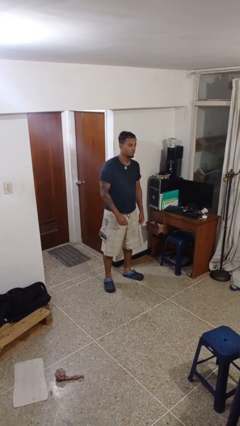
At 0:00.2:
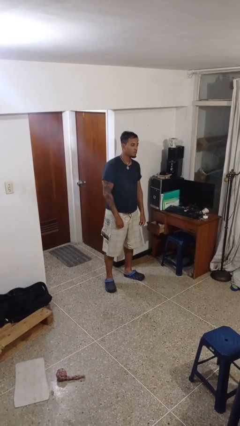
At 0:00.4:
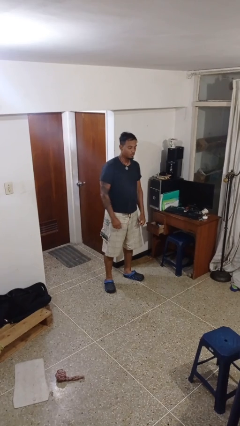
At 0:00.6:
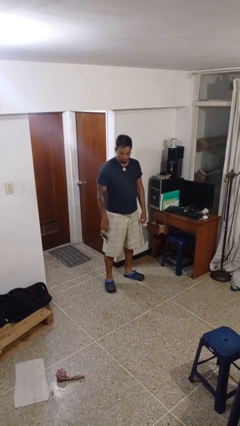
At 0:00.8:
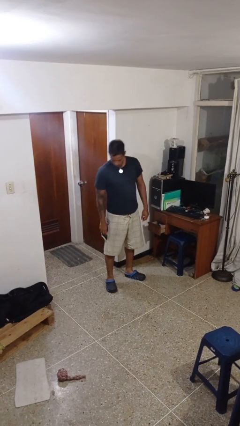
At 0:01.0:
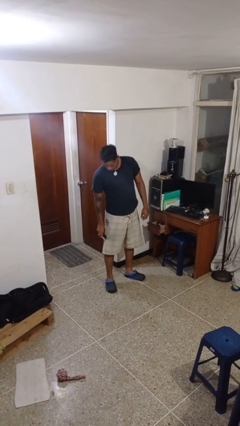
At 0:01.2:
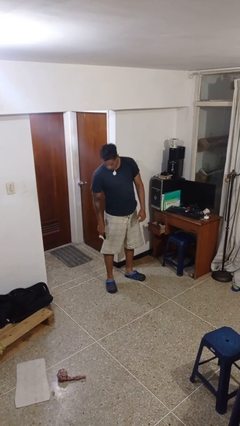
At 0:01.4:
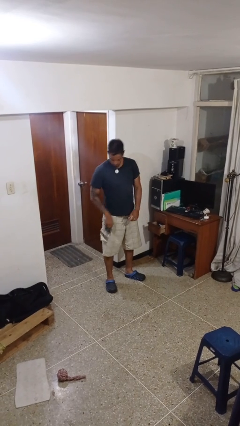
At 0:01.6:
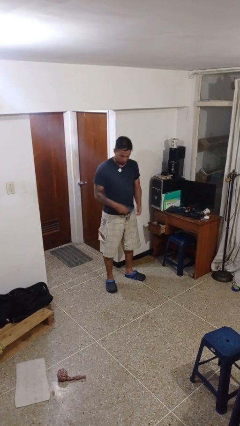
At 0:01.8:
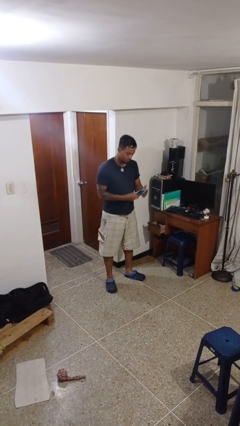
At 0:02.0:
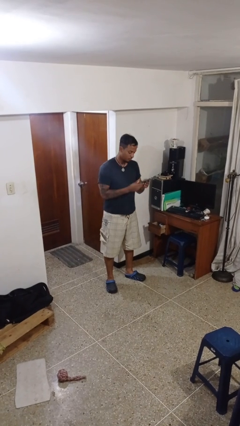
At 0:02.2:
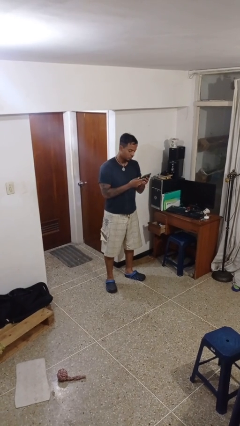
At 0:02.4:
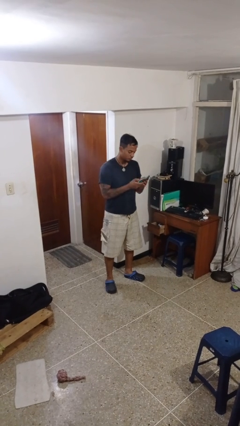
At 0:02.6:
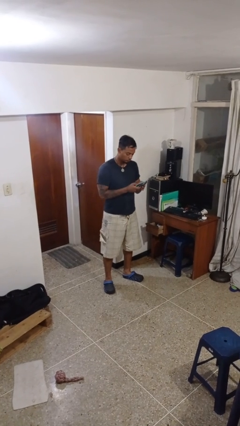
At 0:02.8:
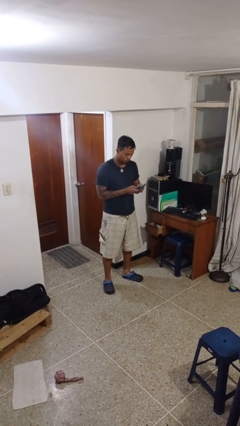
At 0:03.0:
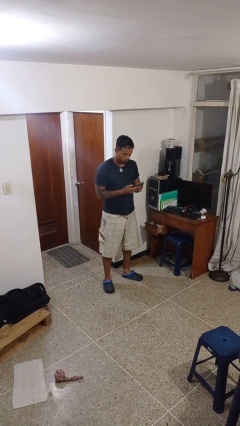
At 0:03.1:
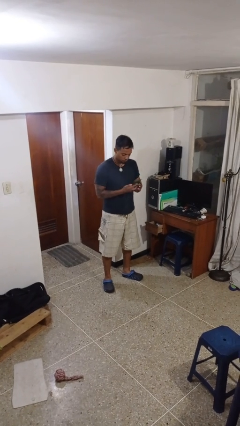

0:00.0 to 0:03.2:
person takes phone from pocket

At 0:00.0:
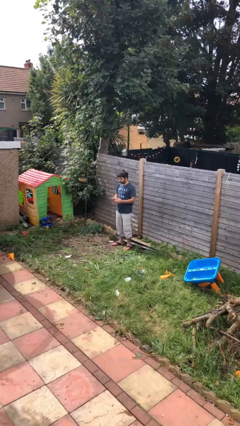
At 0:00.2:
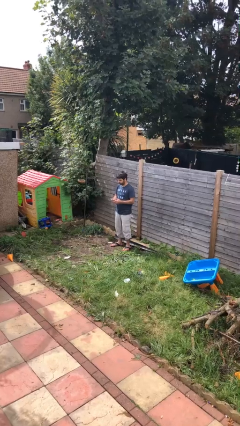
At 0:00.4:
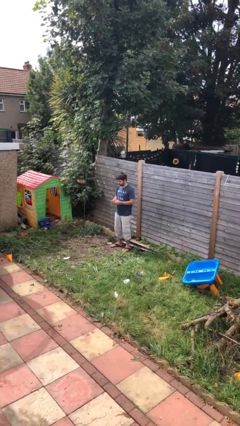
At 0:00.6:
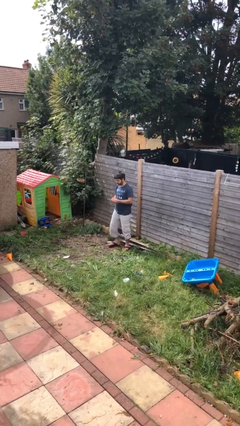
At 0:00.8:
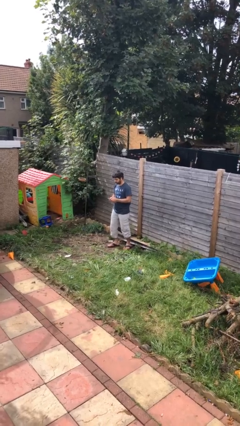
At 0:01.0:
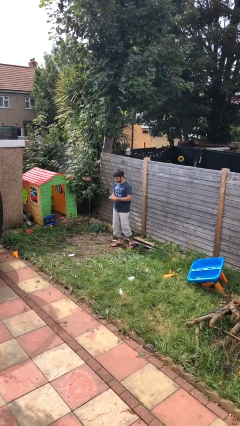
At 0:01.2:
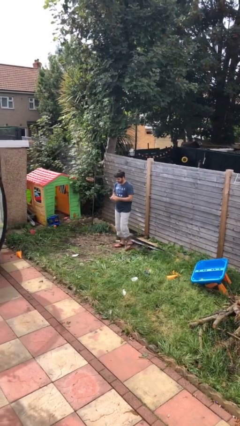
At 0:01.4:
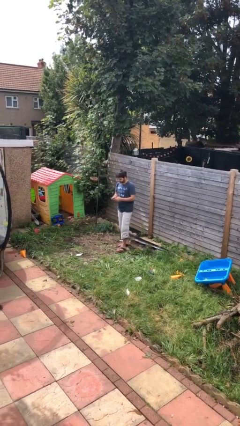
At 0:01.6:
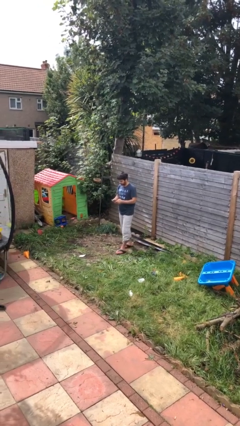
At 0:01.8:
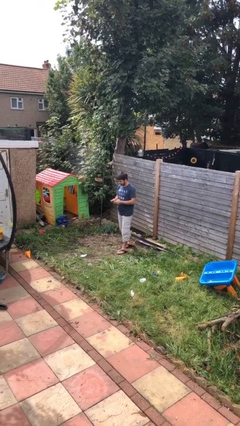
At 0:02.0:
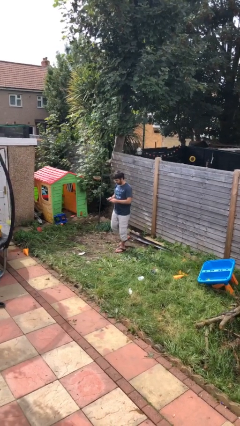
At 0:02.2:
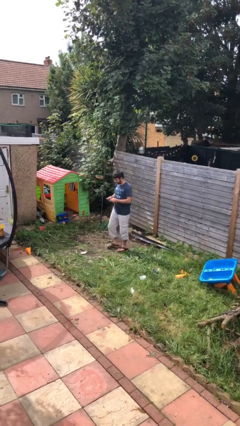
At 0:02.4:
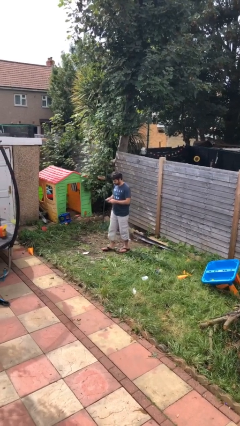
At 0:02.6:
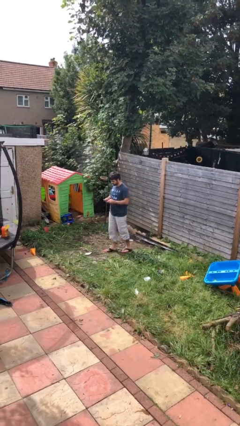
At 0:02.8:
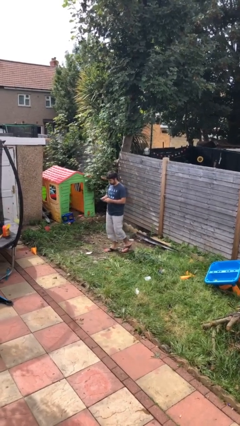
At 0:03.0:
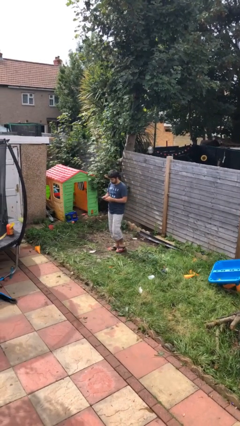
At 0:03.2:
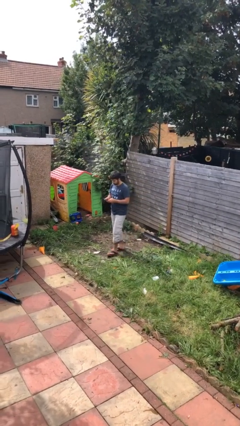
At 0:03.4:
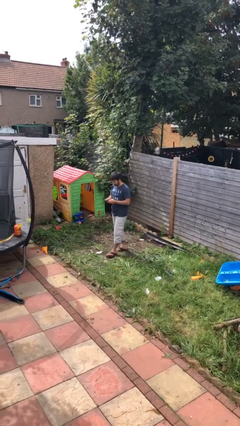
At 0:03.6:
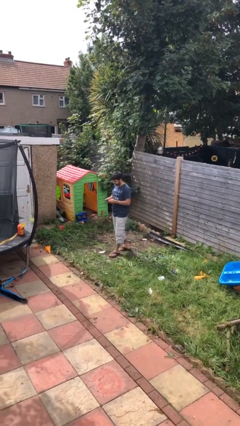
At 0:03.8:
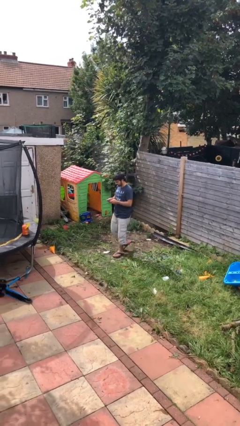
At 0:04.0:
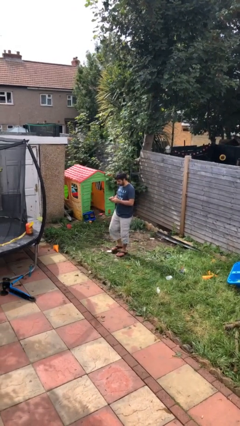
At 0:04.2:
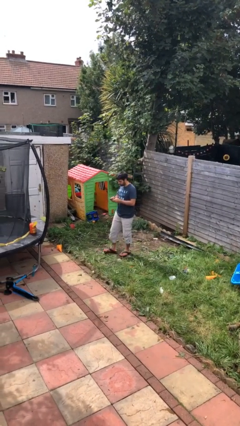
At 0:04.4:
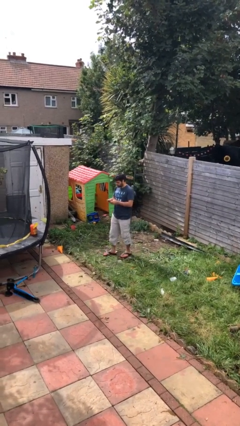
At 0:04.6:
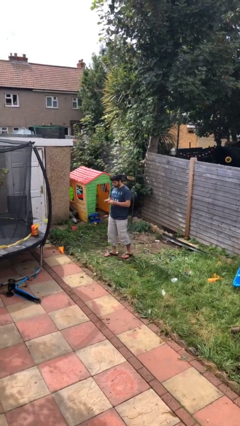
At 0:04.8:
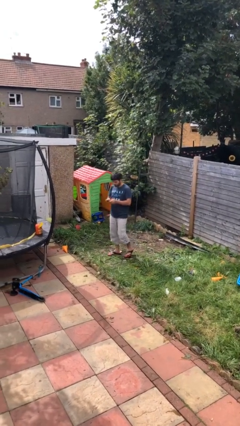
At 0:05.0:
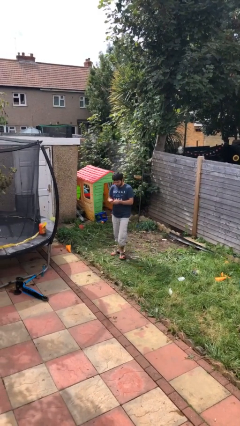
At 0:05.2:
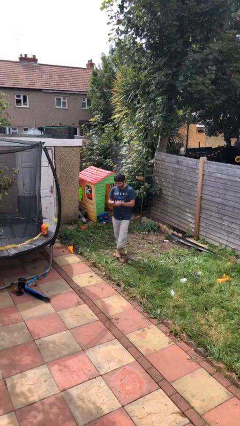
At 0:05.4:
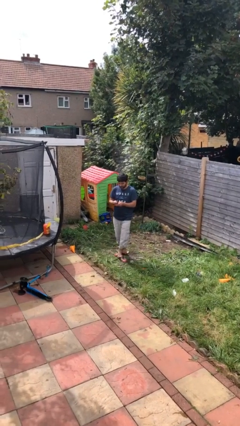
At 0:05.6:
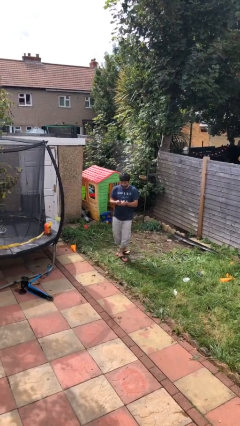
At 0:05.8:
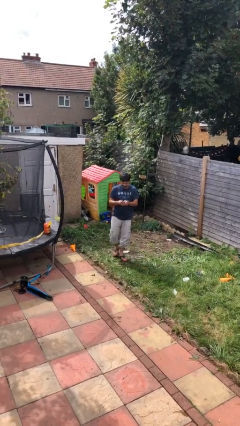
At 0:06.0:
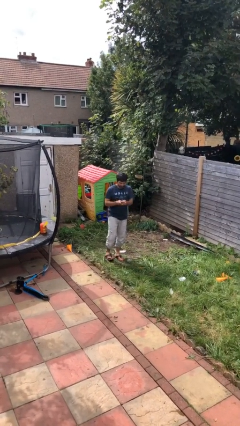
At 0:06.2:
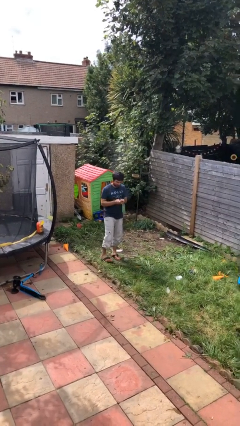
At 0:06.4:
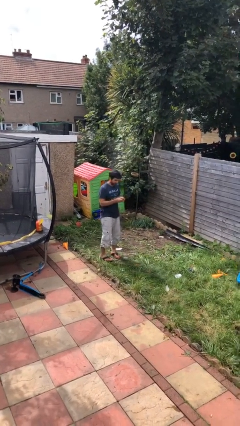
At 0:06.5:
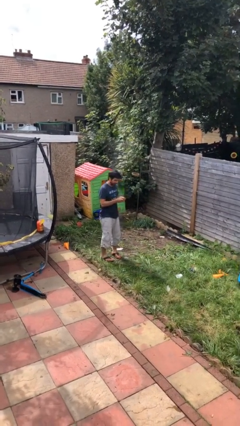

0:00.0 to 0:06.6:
person texts on phone

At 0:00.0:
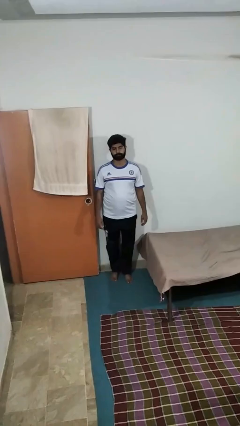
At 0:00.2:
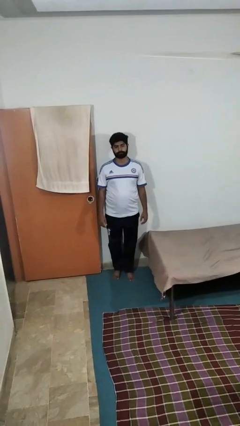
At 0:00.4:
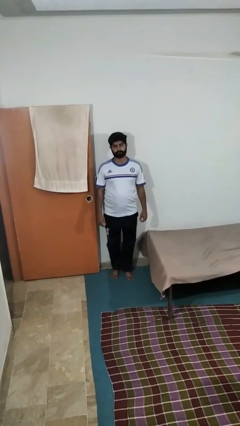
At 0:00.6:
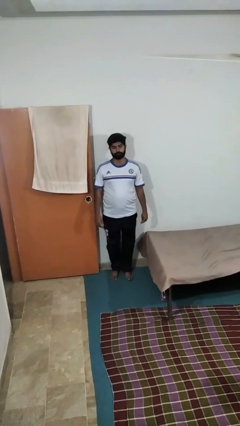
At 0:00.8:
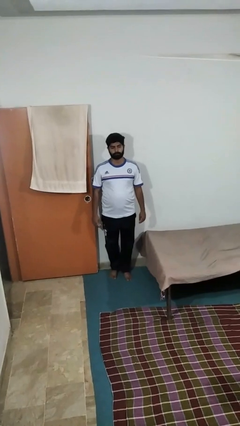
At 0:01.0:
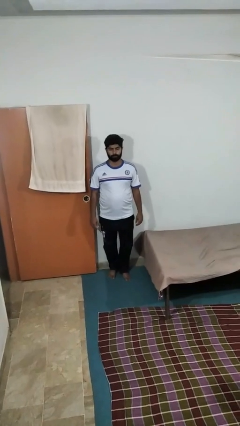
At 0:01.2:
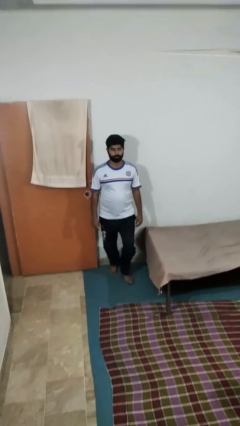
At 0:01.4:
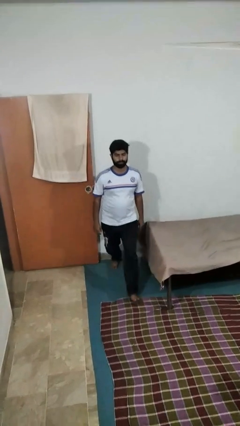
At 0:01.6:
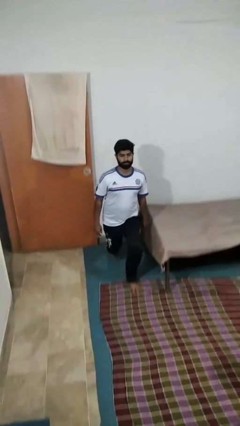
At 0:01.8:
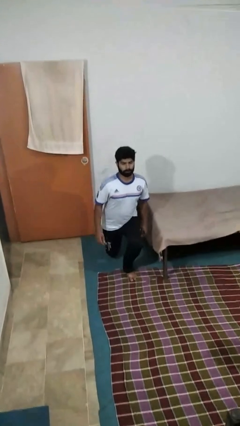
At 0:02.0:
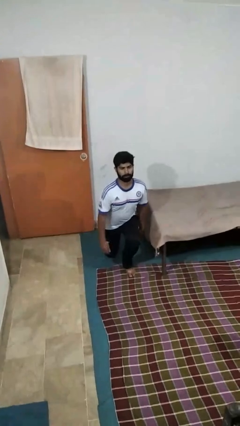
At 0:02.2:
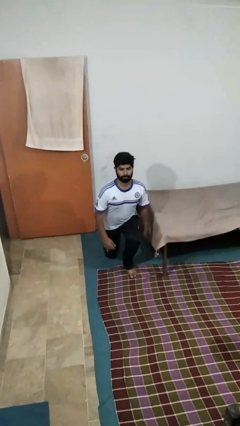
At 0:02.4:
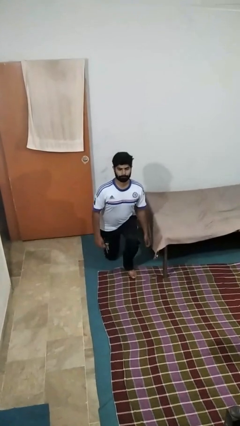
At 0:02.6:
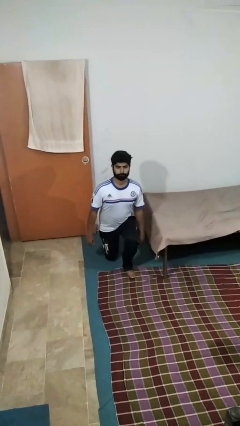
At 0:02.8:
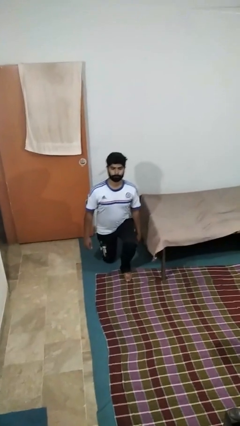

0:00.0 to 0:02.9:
person kneels

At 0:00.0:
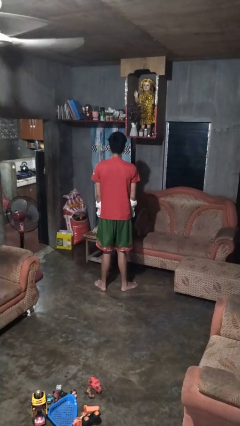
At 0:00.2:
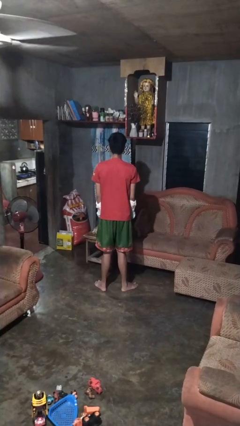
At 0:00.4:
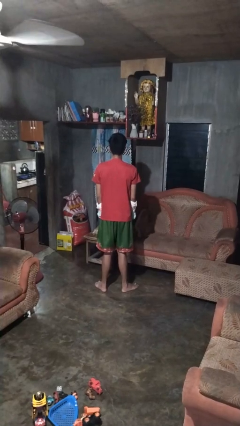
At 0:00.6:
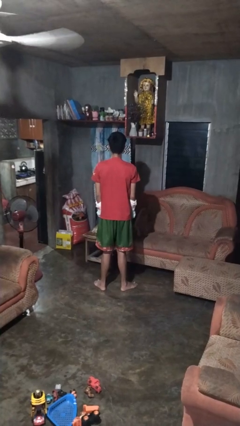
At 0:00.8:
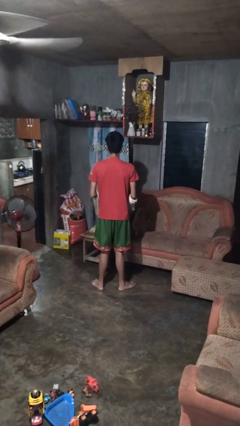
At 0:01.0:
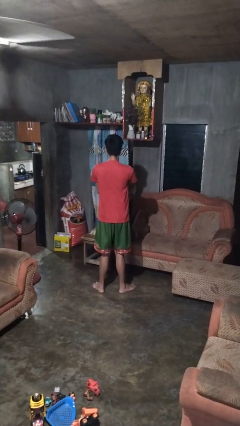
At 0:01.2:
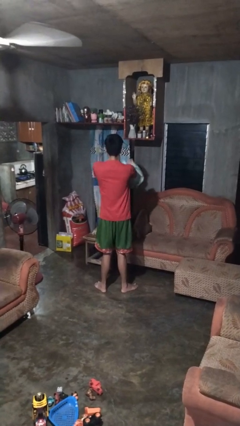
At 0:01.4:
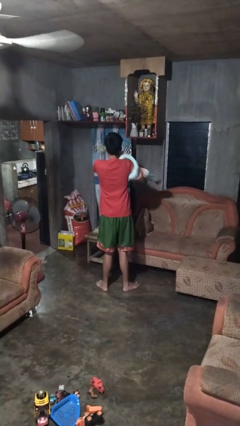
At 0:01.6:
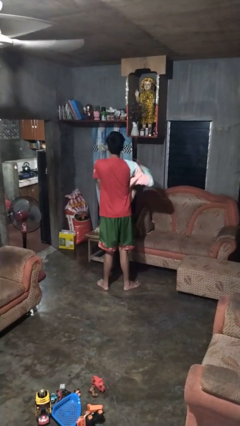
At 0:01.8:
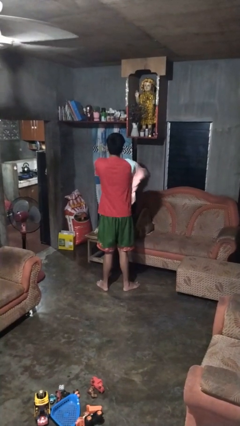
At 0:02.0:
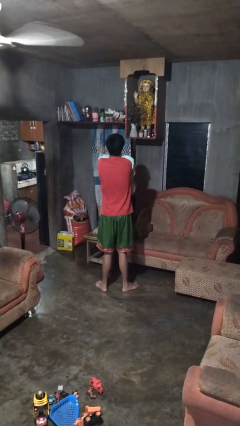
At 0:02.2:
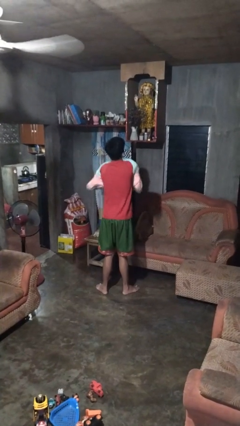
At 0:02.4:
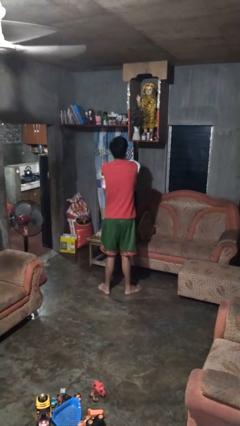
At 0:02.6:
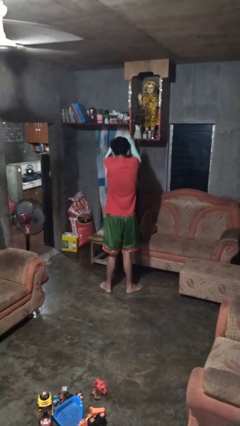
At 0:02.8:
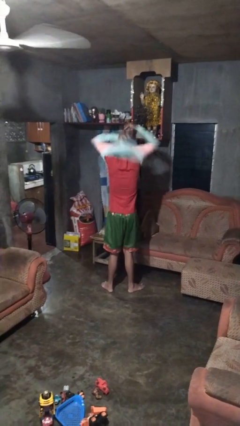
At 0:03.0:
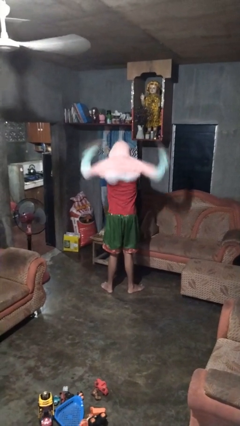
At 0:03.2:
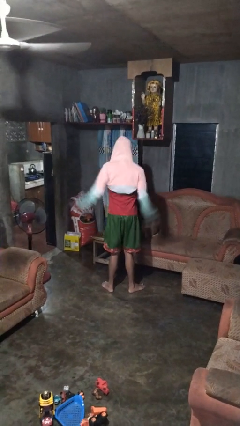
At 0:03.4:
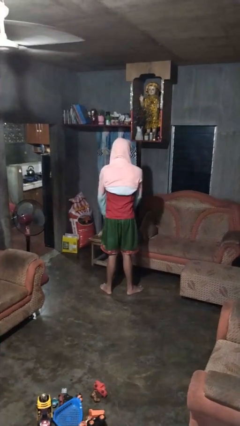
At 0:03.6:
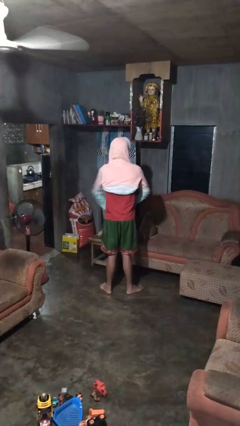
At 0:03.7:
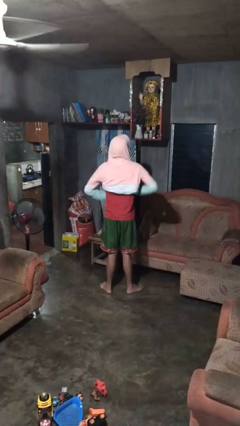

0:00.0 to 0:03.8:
person puts on hoodie

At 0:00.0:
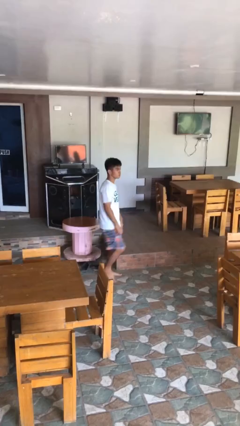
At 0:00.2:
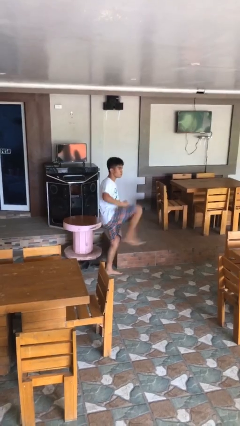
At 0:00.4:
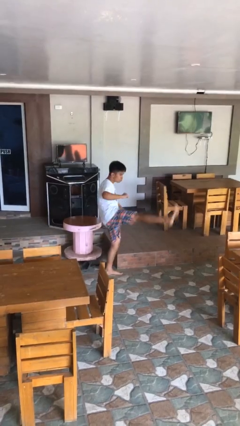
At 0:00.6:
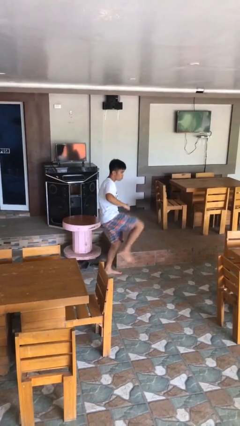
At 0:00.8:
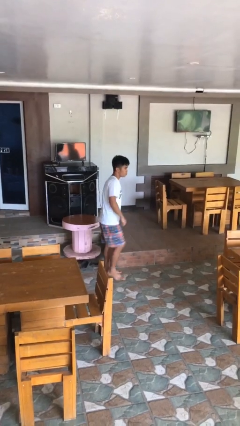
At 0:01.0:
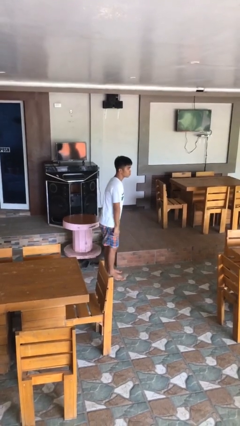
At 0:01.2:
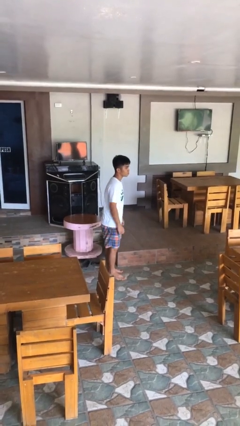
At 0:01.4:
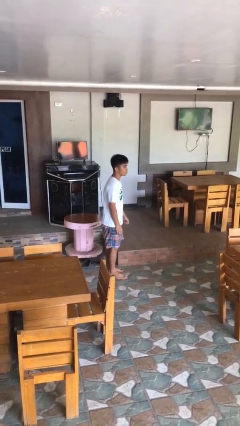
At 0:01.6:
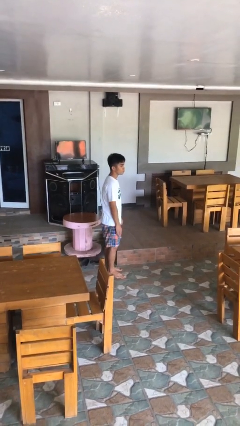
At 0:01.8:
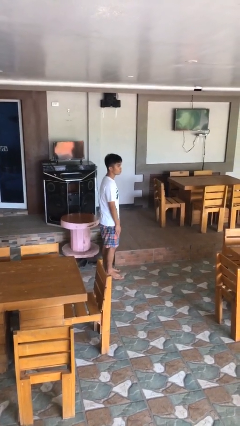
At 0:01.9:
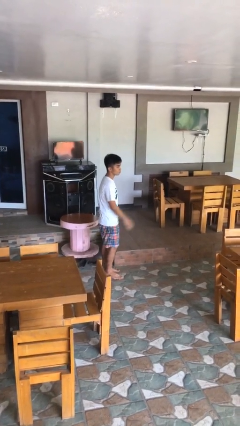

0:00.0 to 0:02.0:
person karate kicks
